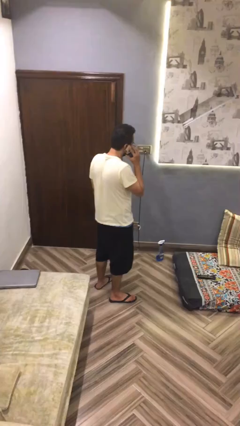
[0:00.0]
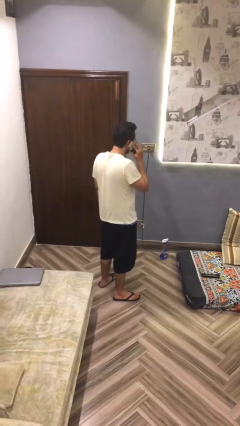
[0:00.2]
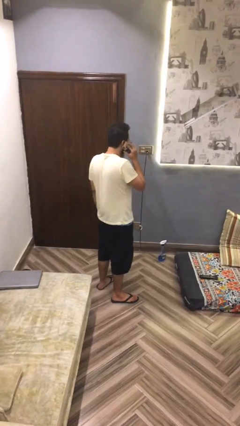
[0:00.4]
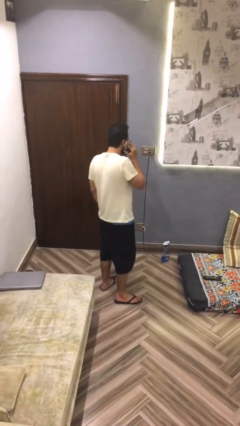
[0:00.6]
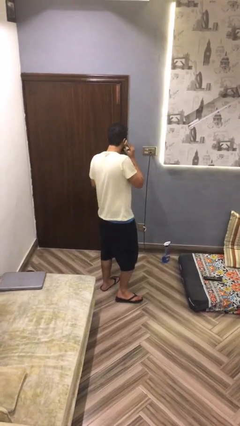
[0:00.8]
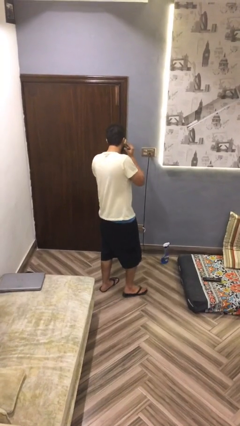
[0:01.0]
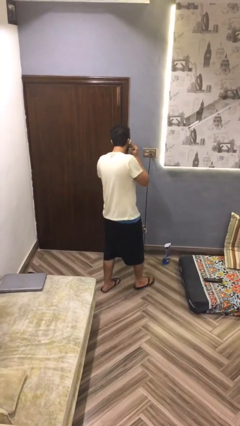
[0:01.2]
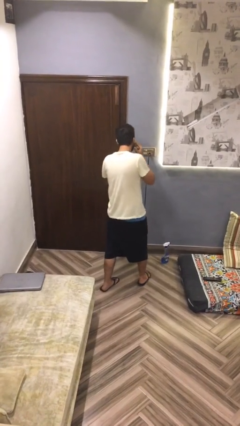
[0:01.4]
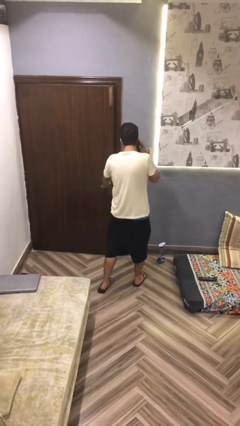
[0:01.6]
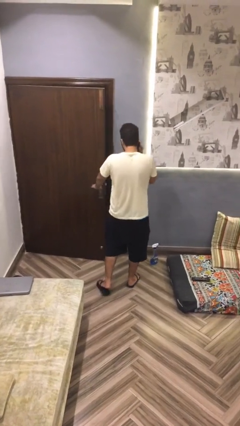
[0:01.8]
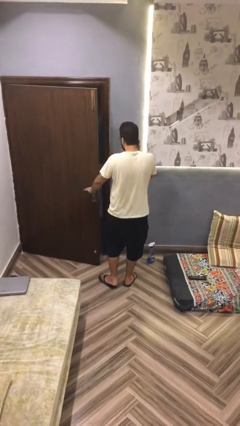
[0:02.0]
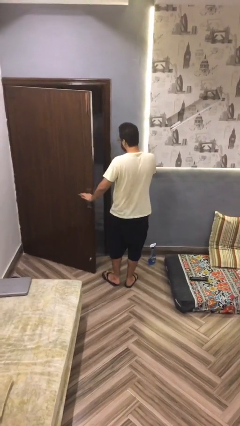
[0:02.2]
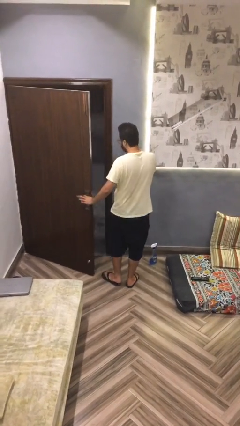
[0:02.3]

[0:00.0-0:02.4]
person opens facility door

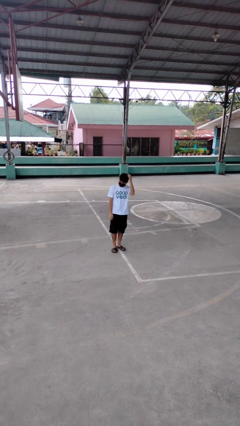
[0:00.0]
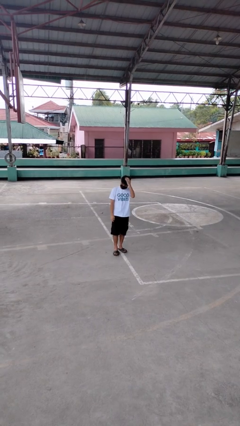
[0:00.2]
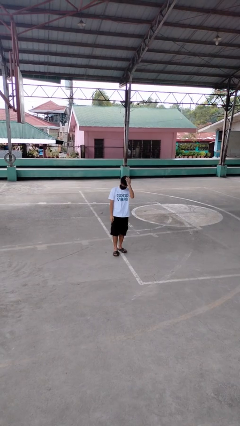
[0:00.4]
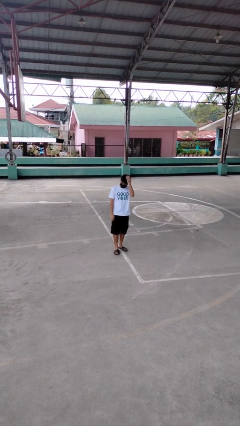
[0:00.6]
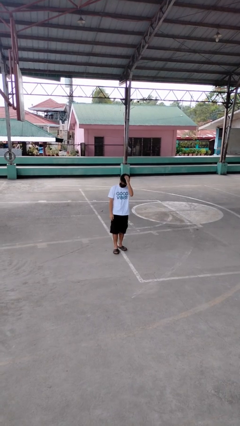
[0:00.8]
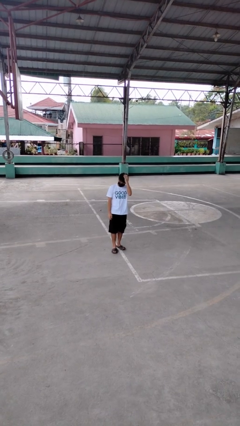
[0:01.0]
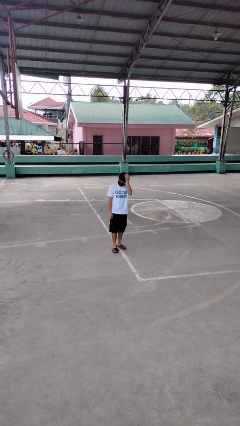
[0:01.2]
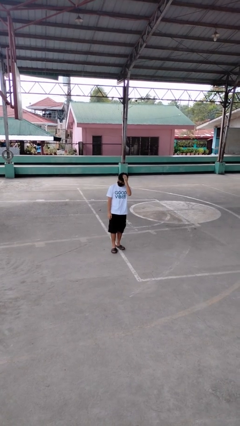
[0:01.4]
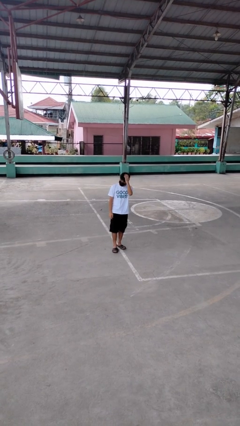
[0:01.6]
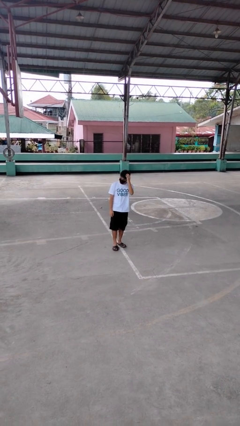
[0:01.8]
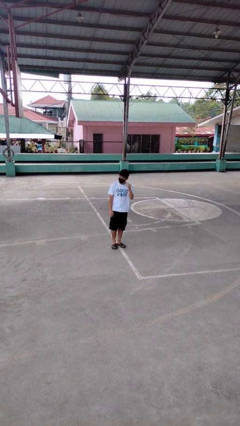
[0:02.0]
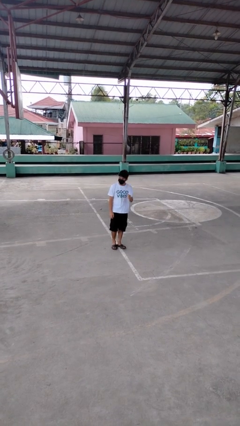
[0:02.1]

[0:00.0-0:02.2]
person pats head

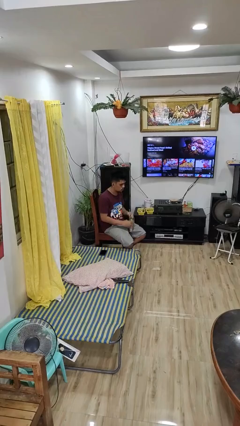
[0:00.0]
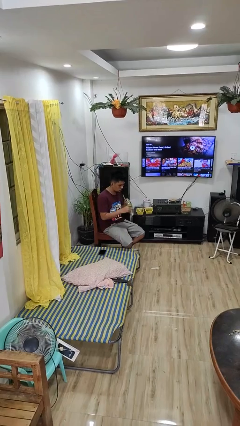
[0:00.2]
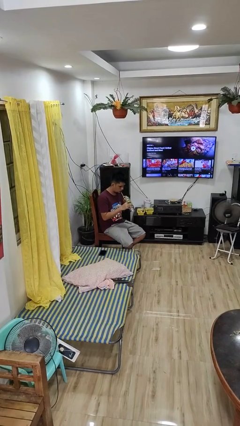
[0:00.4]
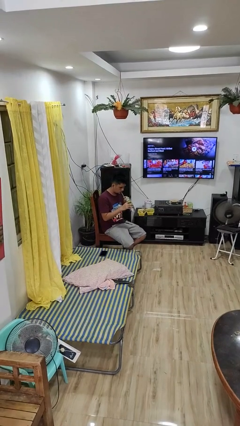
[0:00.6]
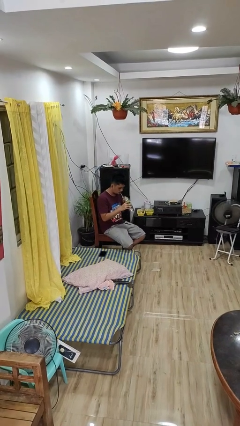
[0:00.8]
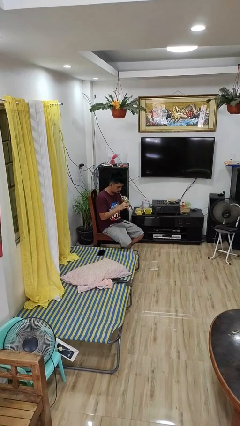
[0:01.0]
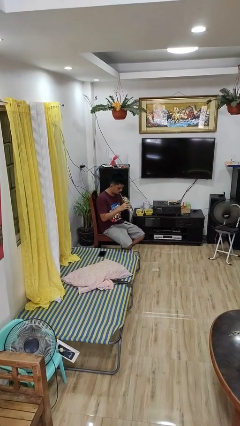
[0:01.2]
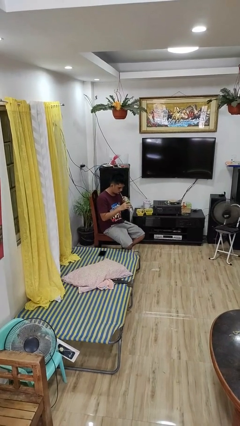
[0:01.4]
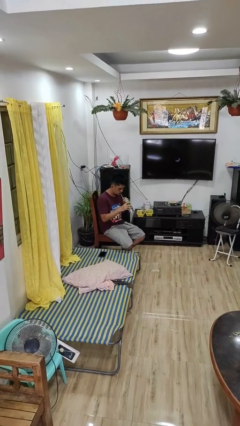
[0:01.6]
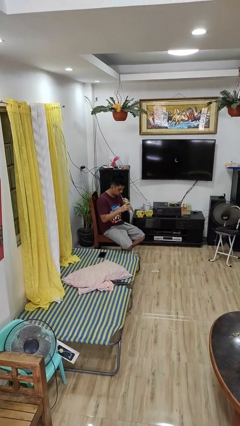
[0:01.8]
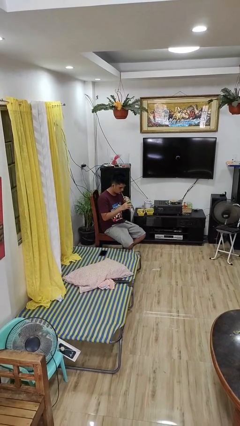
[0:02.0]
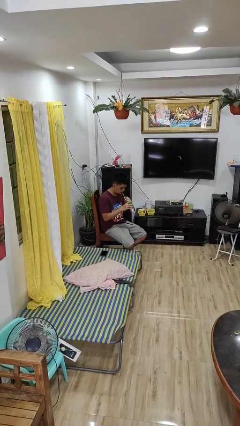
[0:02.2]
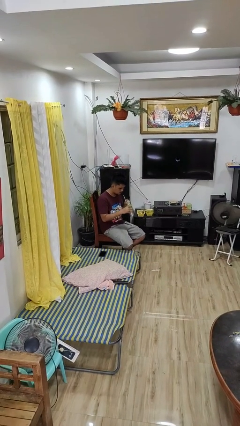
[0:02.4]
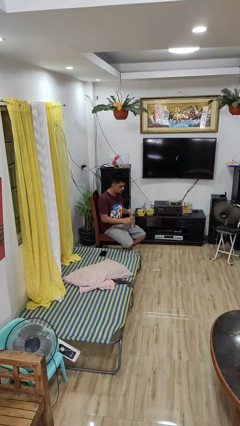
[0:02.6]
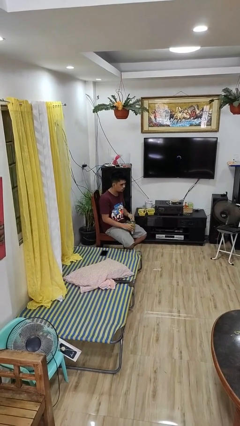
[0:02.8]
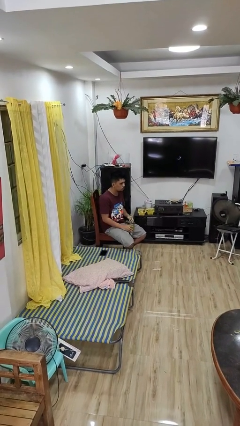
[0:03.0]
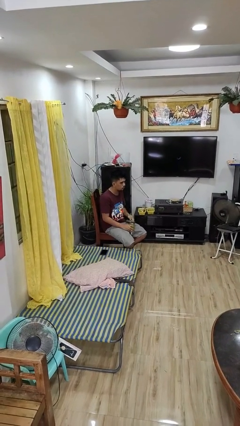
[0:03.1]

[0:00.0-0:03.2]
person drinks from straw

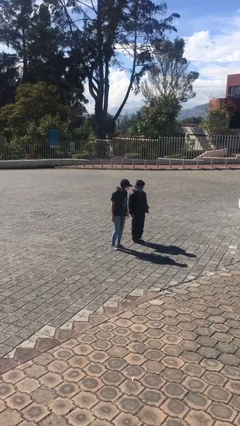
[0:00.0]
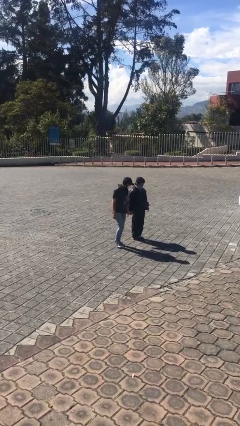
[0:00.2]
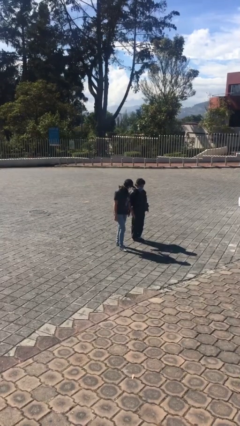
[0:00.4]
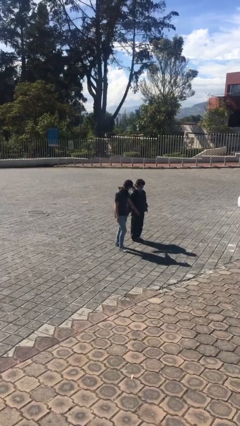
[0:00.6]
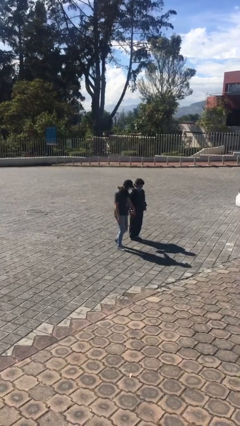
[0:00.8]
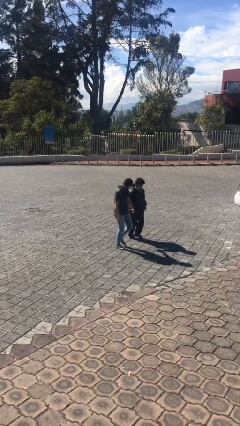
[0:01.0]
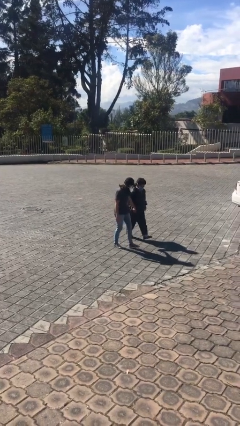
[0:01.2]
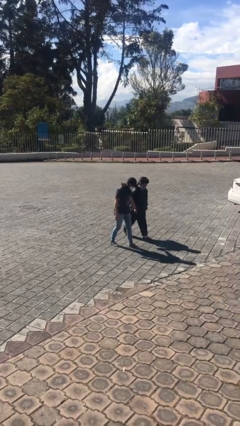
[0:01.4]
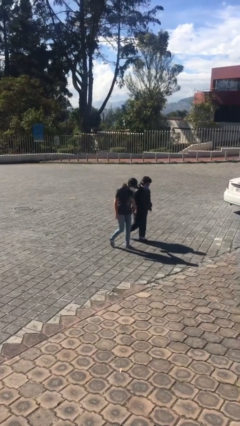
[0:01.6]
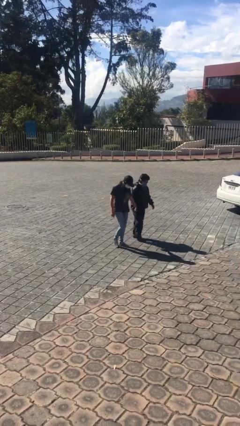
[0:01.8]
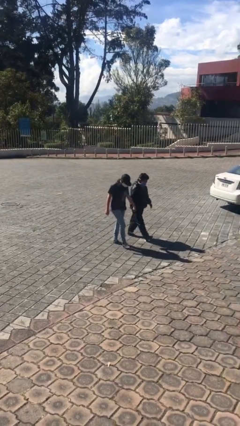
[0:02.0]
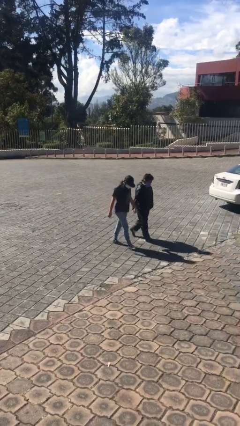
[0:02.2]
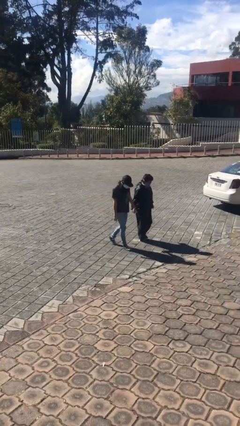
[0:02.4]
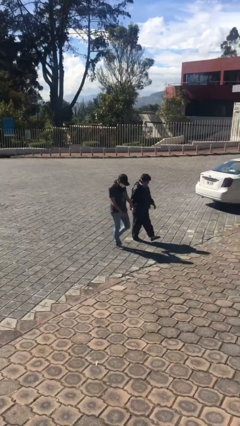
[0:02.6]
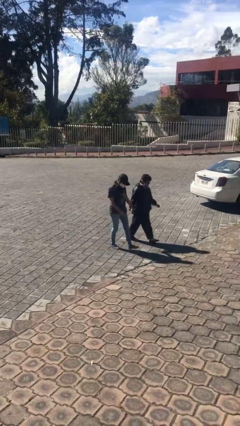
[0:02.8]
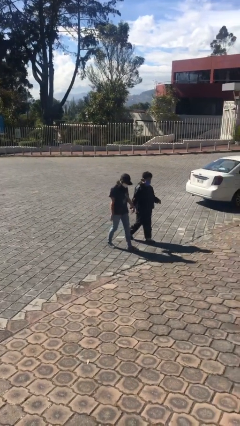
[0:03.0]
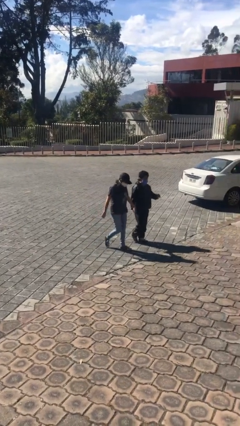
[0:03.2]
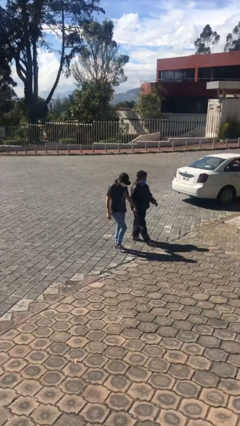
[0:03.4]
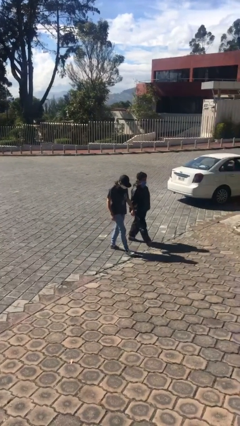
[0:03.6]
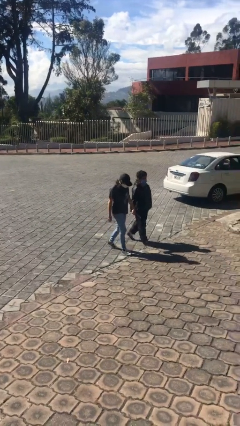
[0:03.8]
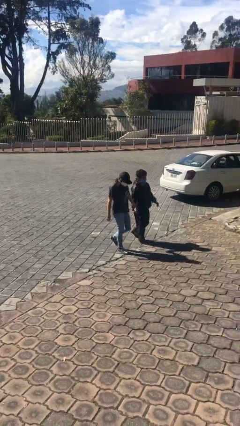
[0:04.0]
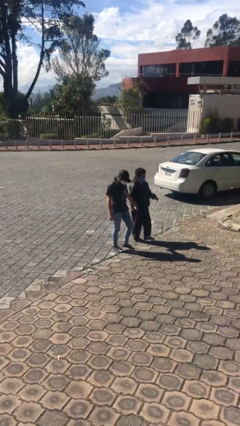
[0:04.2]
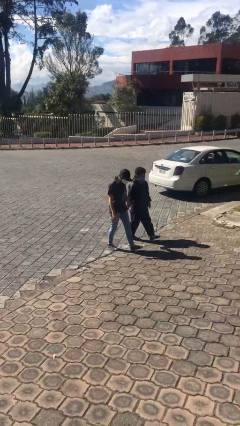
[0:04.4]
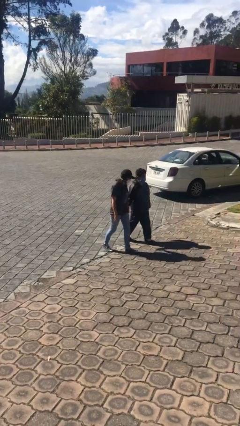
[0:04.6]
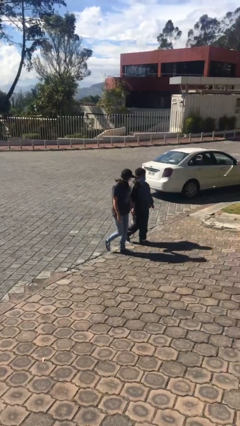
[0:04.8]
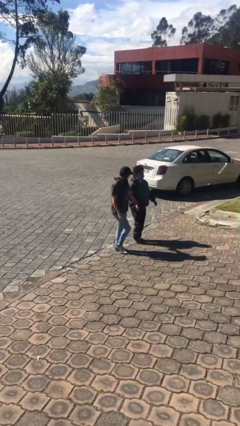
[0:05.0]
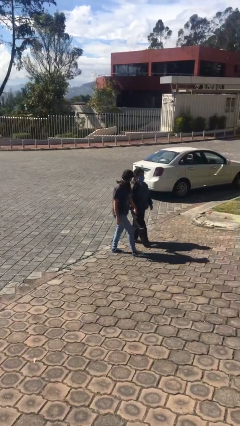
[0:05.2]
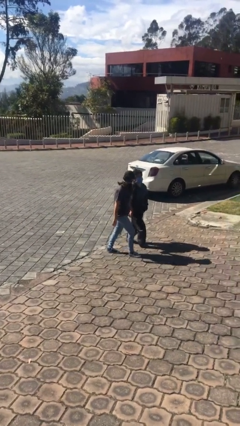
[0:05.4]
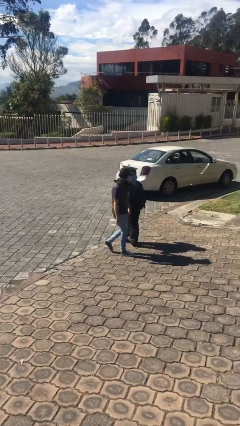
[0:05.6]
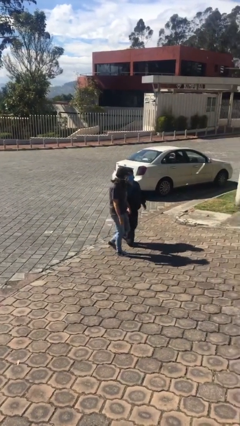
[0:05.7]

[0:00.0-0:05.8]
person holds hand

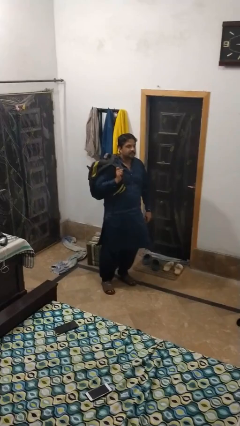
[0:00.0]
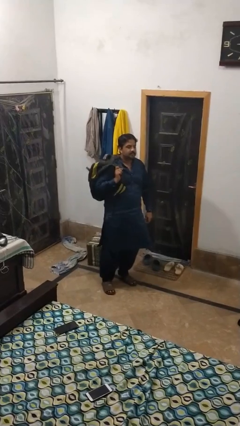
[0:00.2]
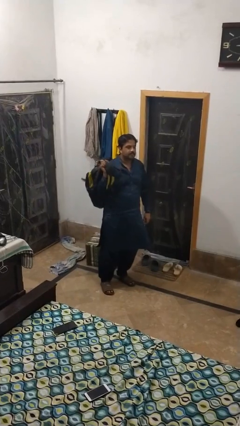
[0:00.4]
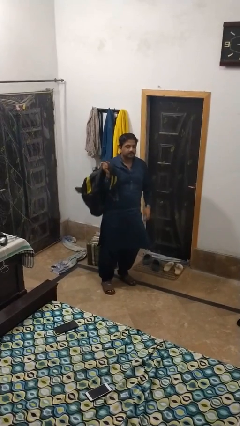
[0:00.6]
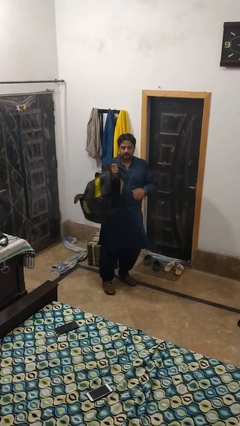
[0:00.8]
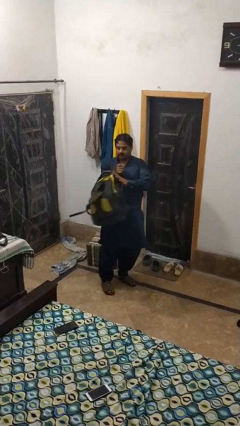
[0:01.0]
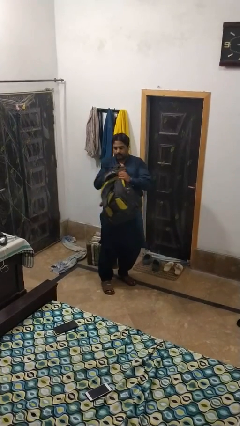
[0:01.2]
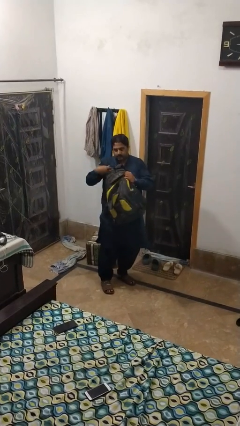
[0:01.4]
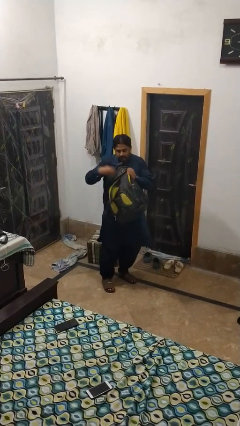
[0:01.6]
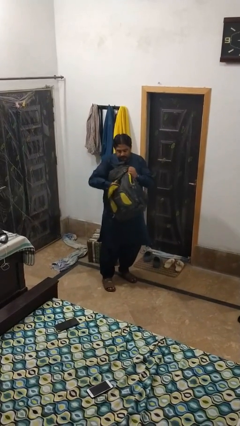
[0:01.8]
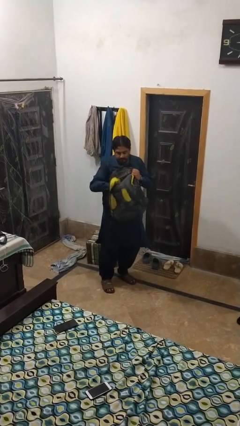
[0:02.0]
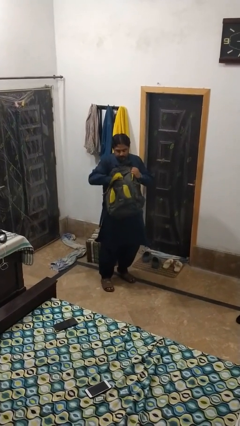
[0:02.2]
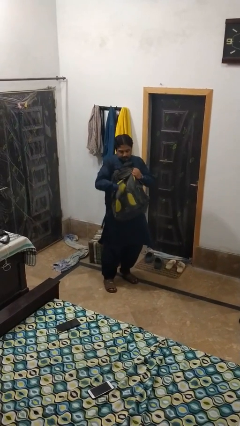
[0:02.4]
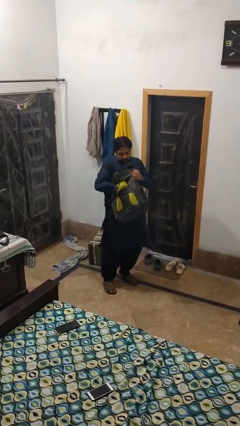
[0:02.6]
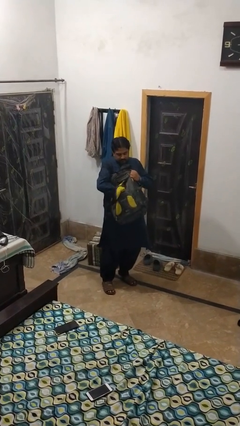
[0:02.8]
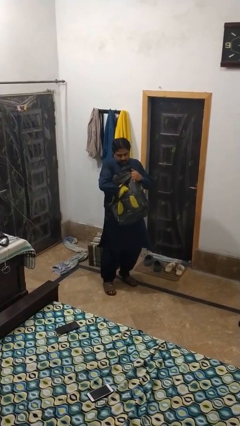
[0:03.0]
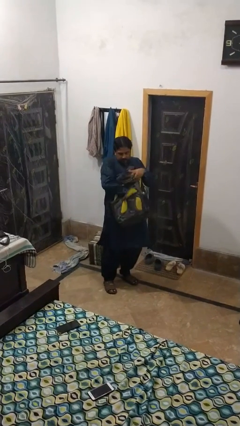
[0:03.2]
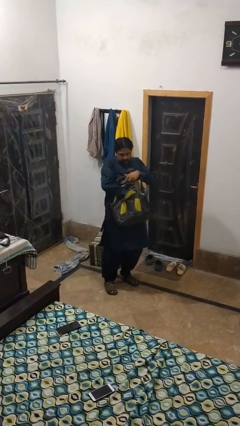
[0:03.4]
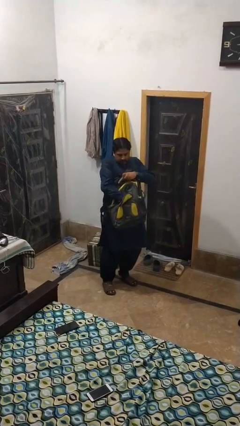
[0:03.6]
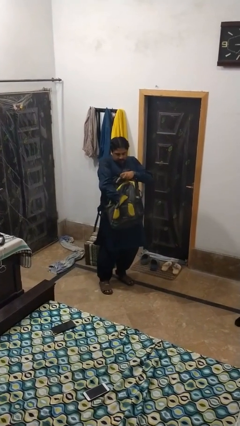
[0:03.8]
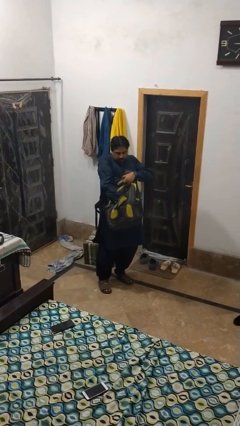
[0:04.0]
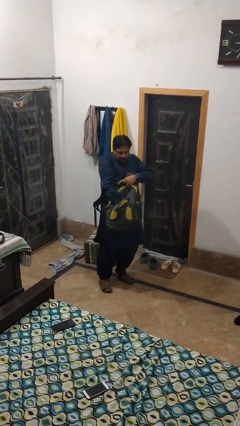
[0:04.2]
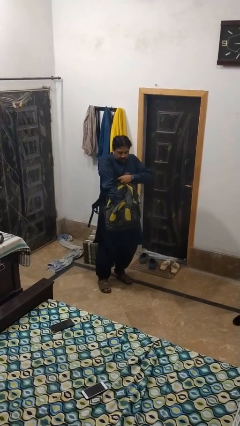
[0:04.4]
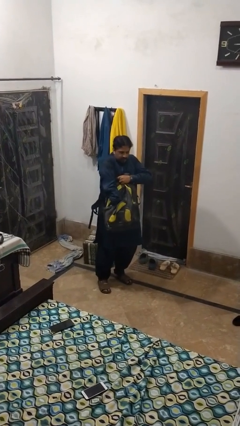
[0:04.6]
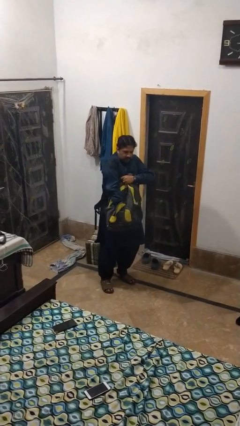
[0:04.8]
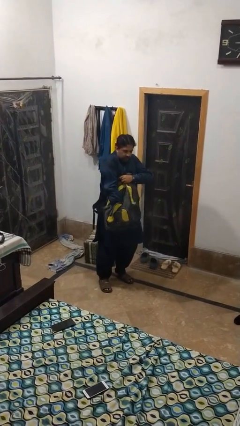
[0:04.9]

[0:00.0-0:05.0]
person searches in backpack
